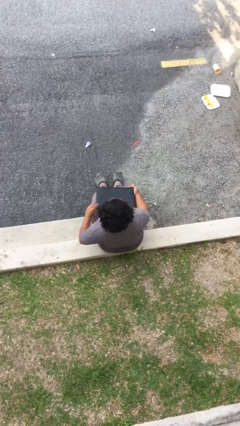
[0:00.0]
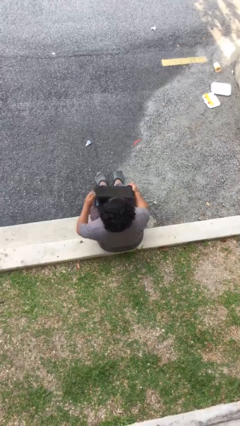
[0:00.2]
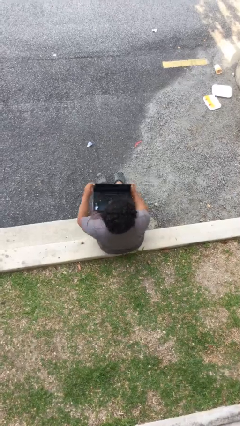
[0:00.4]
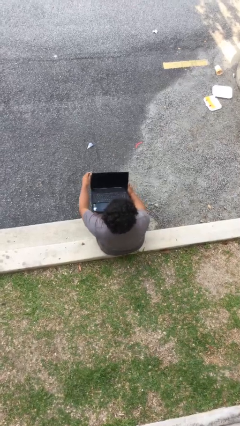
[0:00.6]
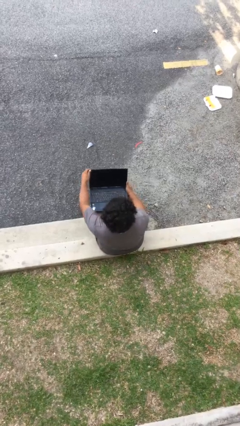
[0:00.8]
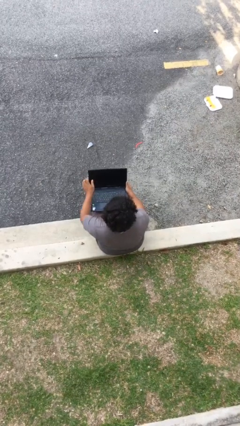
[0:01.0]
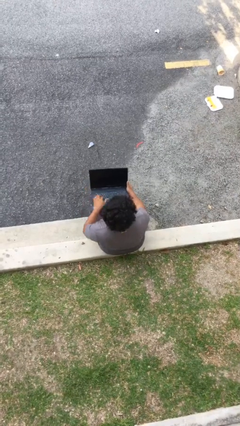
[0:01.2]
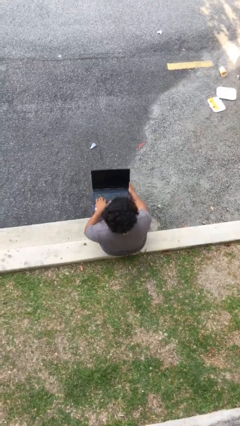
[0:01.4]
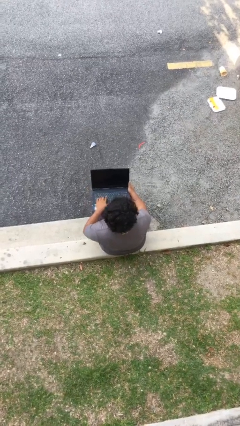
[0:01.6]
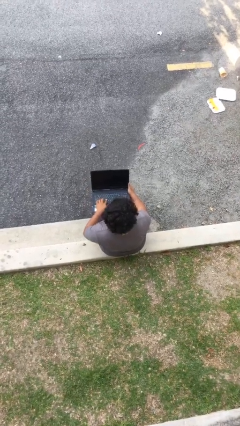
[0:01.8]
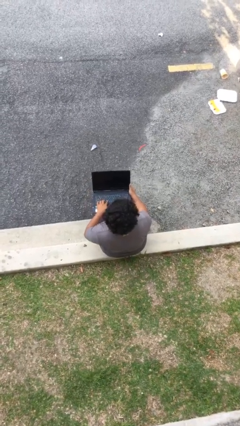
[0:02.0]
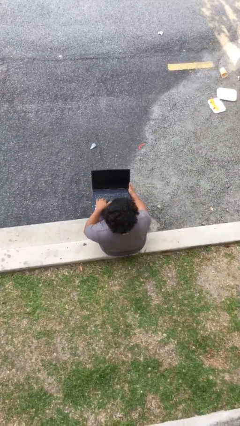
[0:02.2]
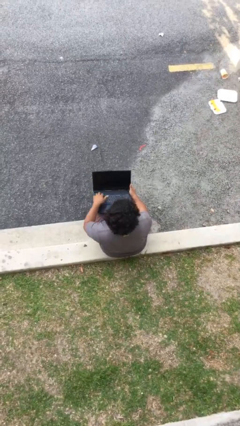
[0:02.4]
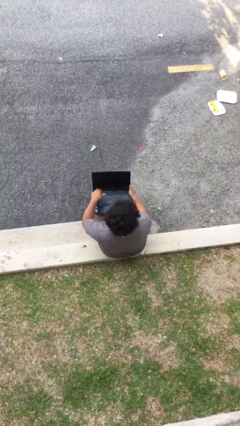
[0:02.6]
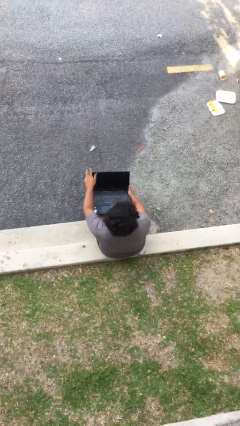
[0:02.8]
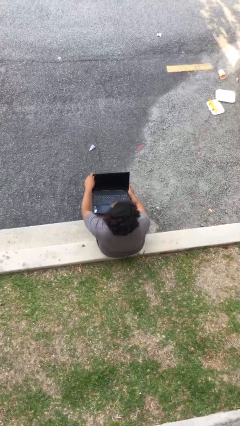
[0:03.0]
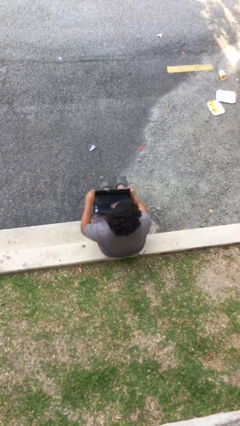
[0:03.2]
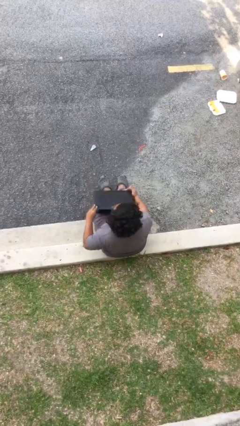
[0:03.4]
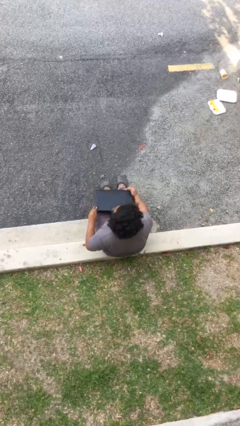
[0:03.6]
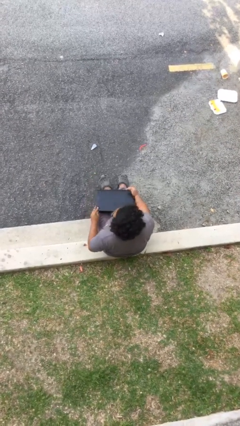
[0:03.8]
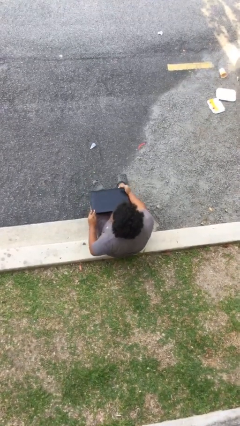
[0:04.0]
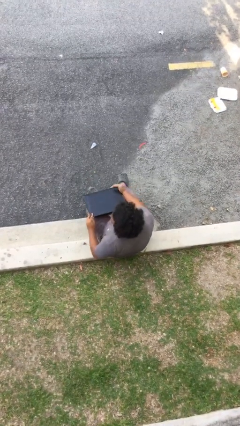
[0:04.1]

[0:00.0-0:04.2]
person interacts with laptop

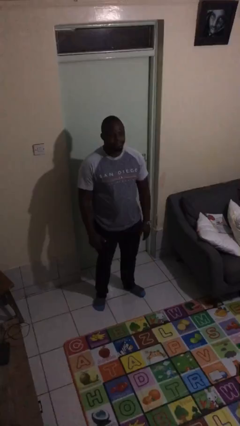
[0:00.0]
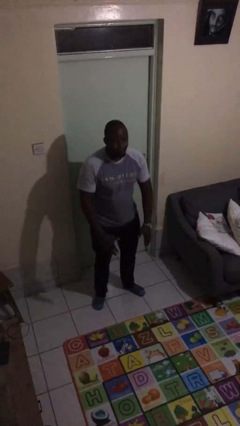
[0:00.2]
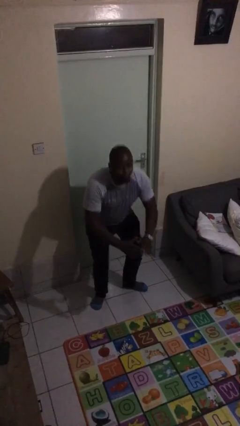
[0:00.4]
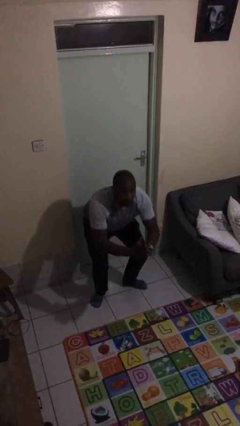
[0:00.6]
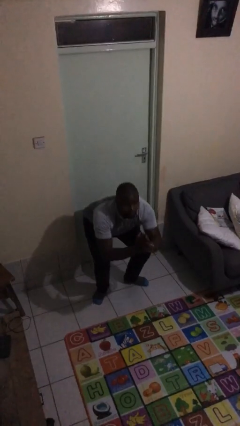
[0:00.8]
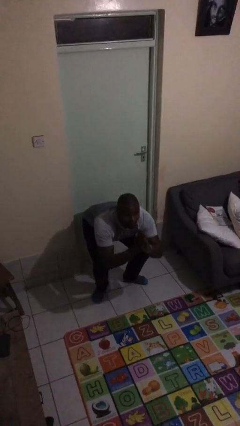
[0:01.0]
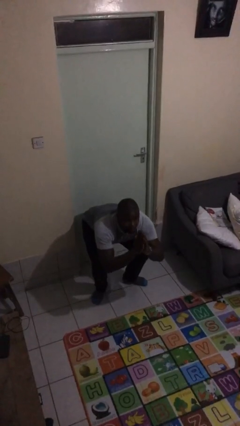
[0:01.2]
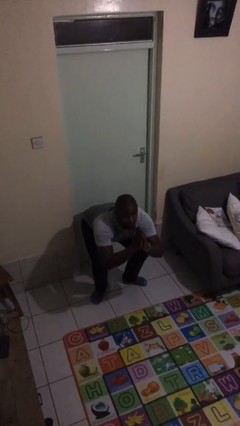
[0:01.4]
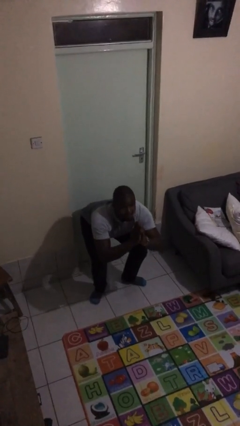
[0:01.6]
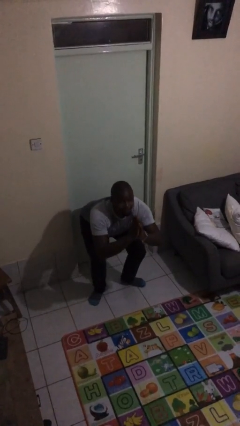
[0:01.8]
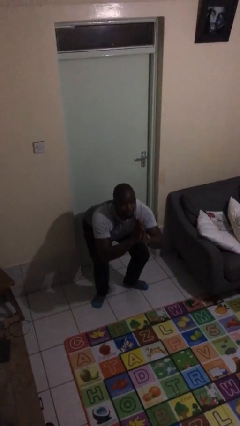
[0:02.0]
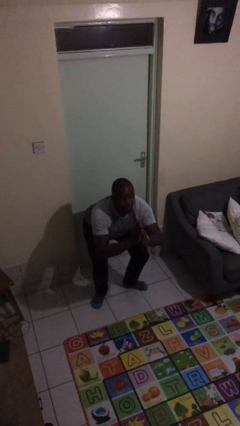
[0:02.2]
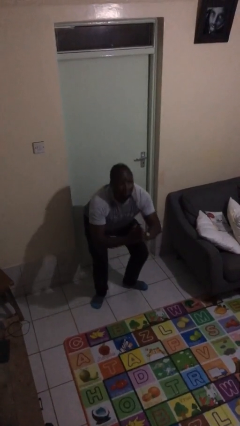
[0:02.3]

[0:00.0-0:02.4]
person squats

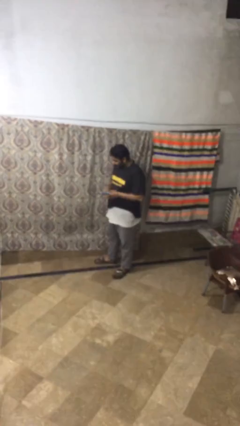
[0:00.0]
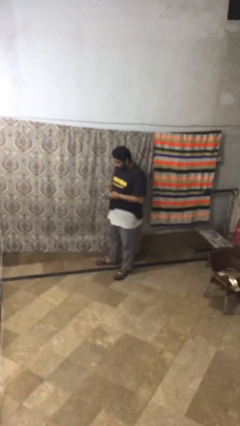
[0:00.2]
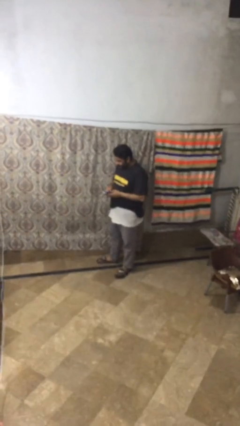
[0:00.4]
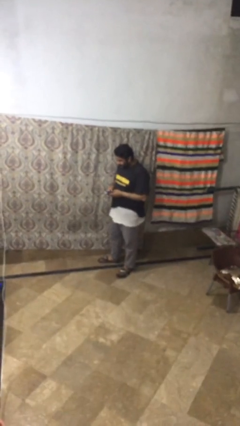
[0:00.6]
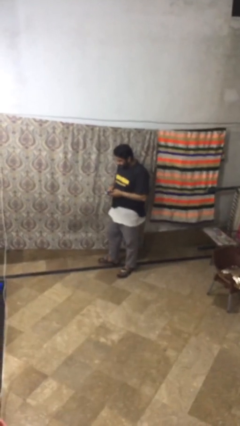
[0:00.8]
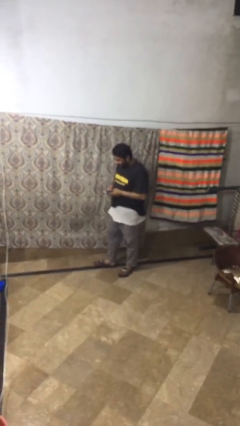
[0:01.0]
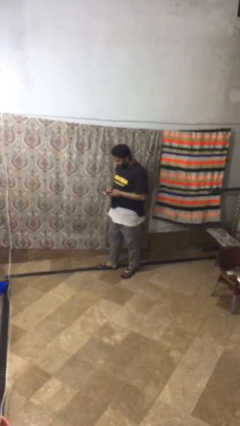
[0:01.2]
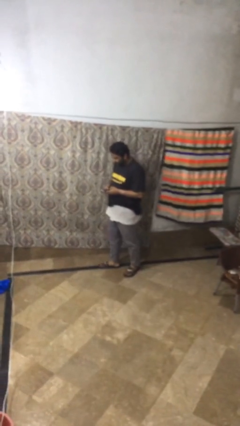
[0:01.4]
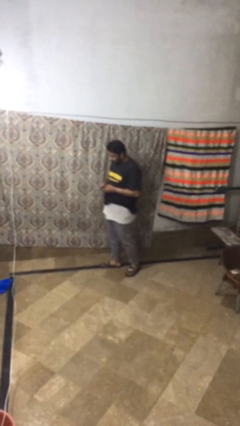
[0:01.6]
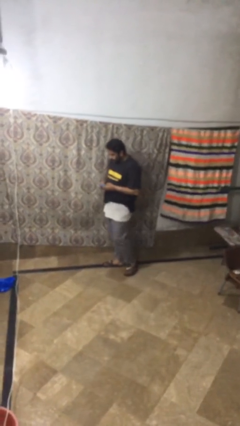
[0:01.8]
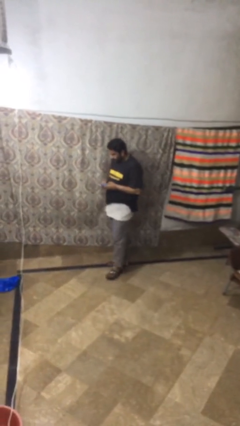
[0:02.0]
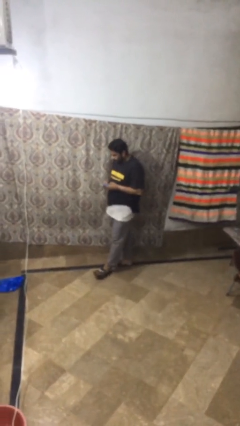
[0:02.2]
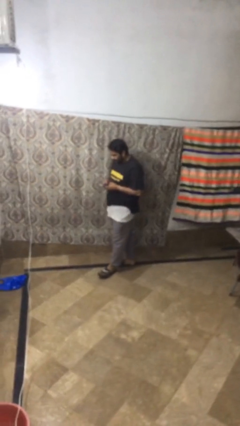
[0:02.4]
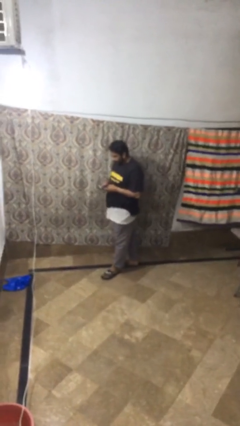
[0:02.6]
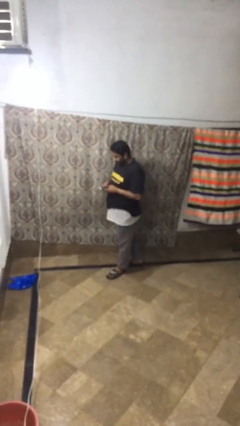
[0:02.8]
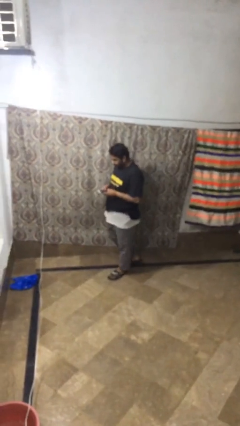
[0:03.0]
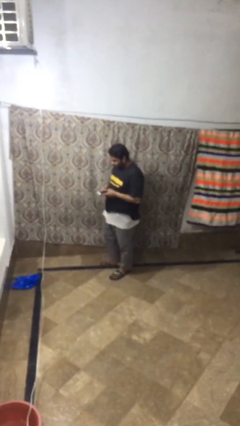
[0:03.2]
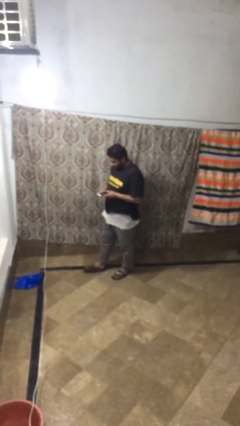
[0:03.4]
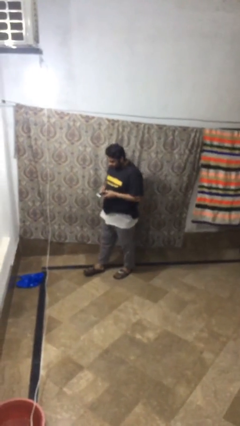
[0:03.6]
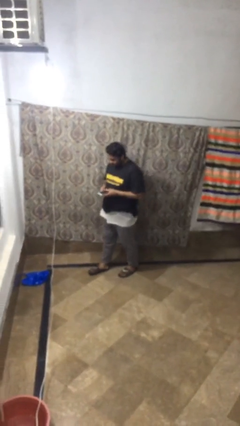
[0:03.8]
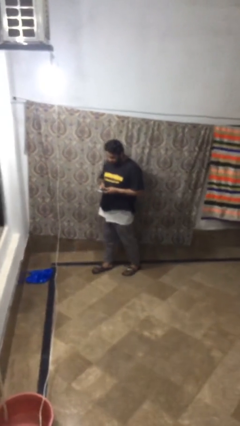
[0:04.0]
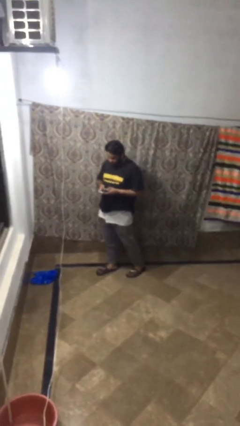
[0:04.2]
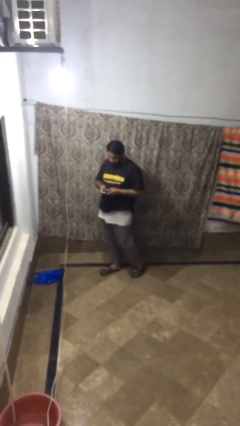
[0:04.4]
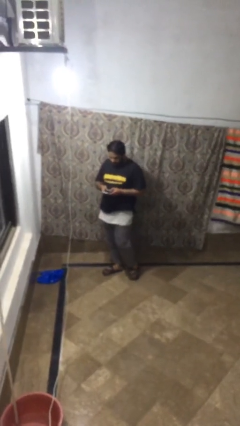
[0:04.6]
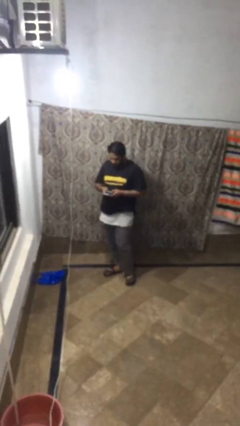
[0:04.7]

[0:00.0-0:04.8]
person texts on phone

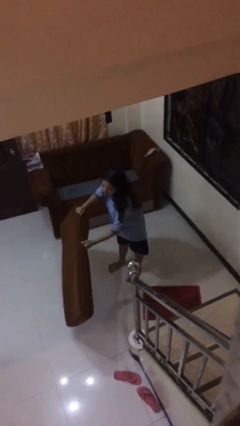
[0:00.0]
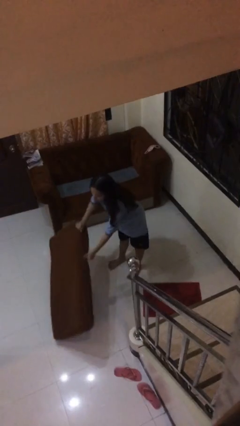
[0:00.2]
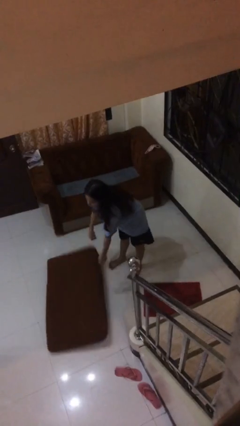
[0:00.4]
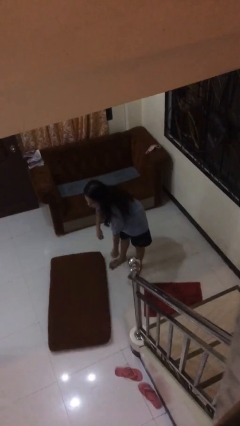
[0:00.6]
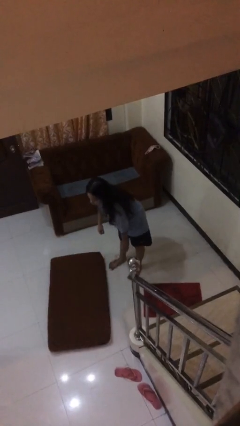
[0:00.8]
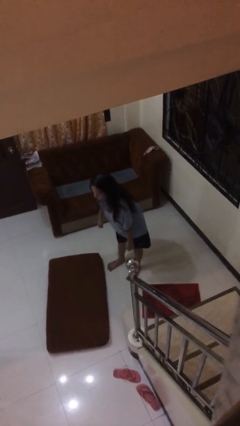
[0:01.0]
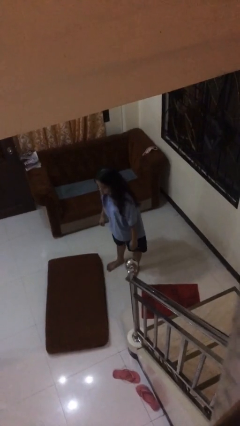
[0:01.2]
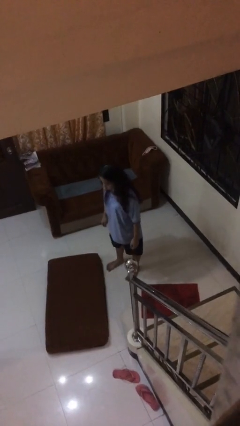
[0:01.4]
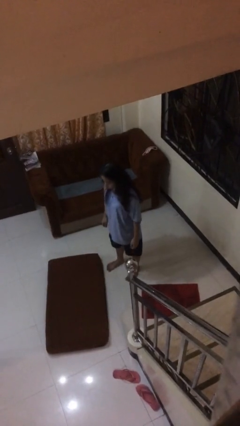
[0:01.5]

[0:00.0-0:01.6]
person puts down object on floor

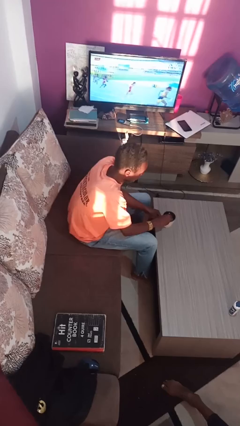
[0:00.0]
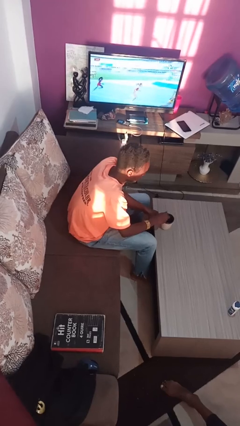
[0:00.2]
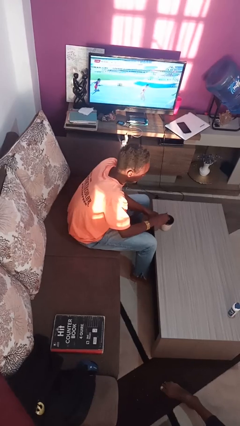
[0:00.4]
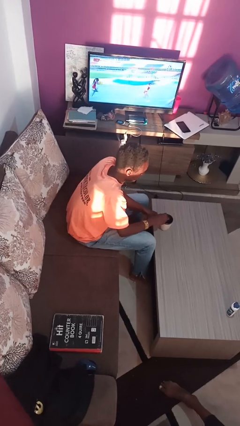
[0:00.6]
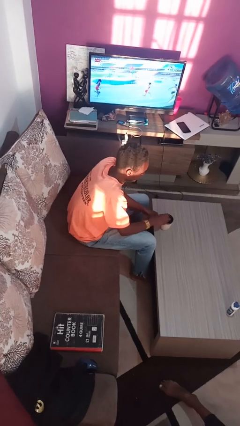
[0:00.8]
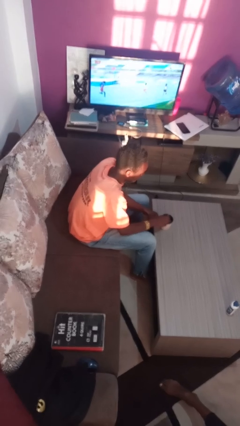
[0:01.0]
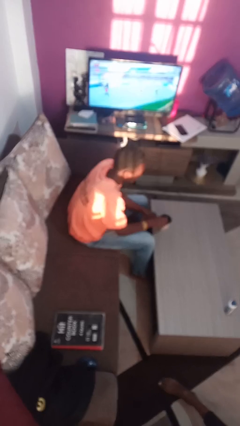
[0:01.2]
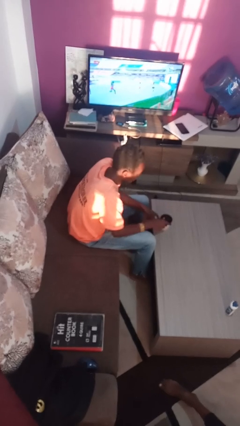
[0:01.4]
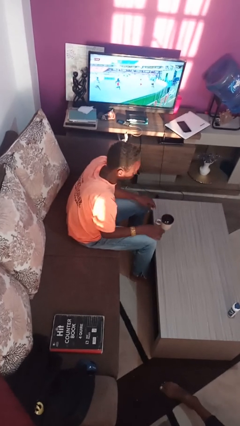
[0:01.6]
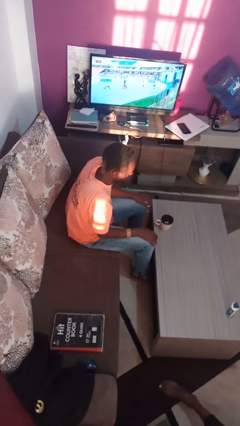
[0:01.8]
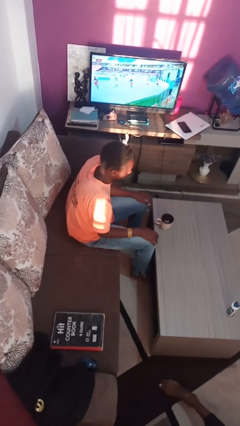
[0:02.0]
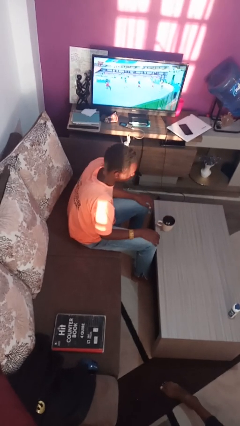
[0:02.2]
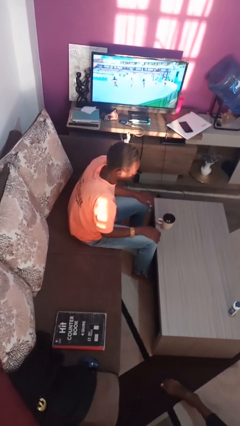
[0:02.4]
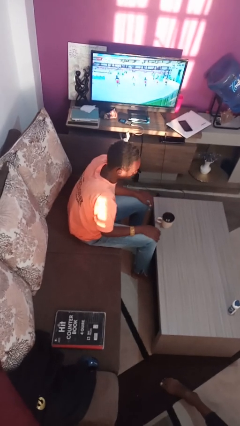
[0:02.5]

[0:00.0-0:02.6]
person stirs mug

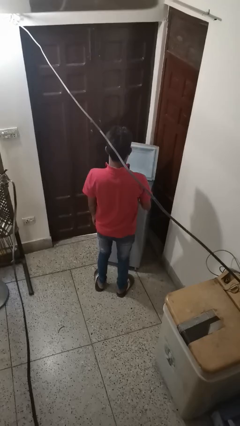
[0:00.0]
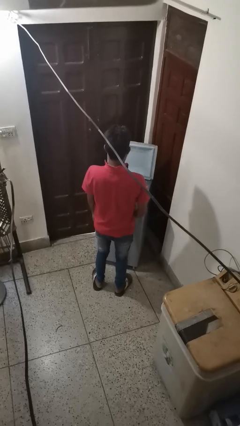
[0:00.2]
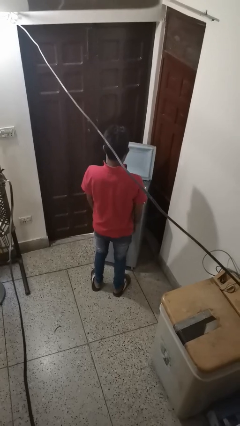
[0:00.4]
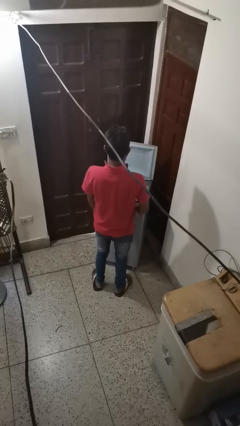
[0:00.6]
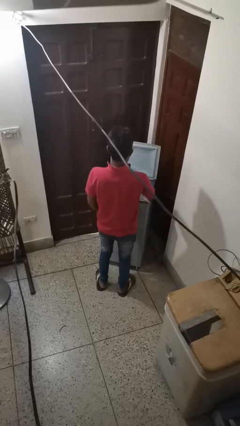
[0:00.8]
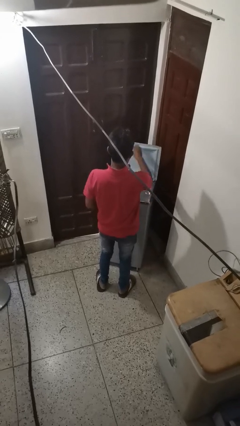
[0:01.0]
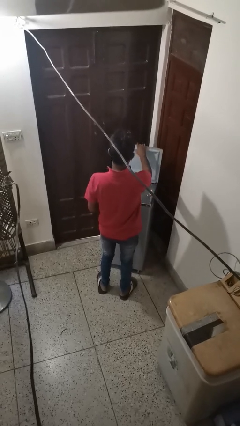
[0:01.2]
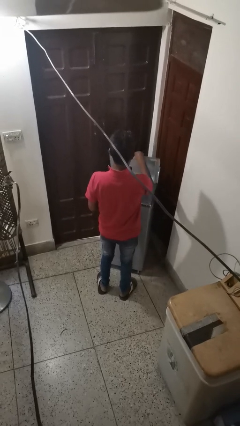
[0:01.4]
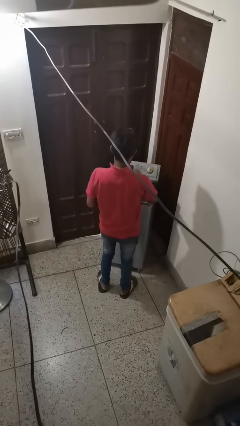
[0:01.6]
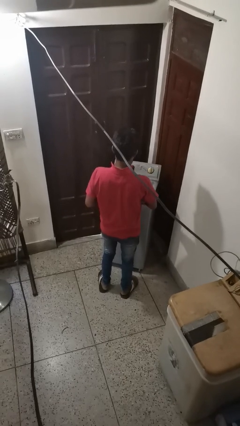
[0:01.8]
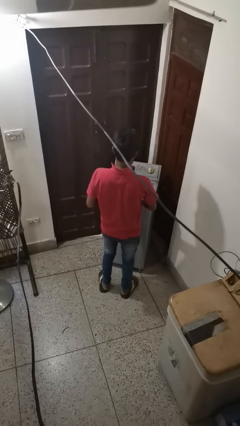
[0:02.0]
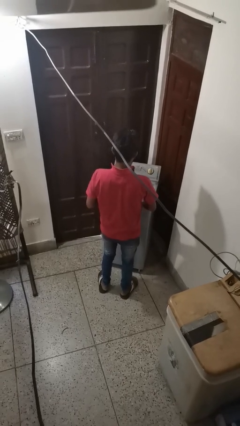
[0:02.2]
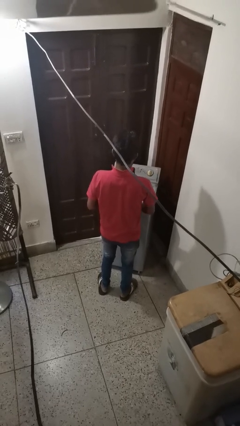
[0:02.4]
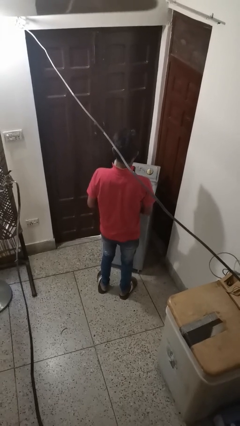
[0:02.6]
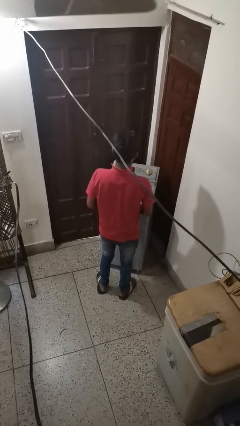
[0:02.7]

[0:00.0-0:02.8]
person closes clothes washer
